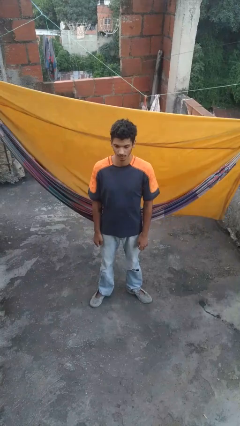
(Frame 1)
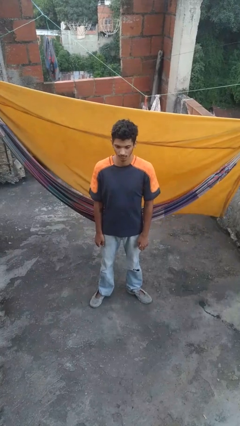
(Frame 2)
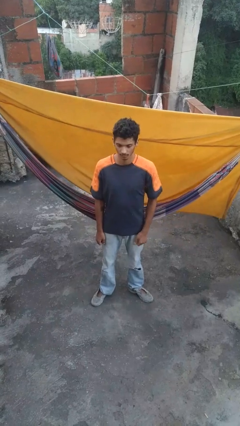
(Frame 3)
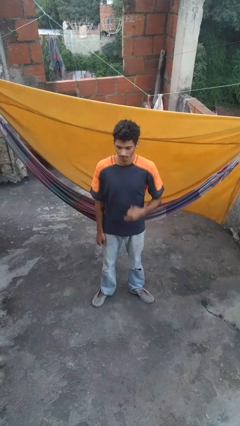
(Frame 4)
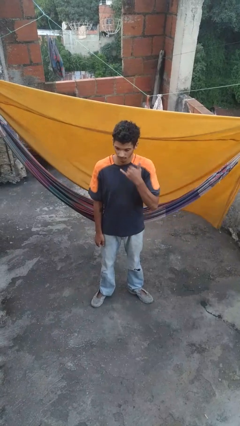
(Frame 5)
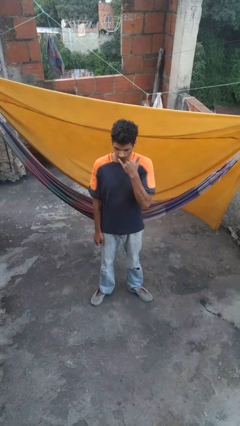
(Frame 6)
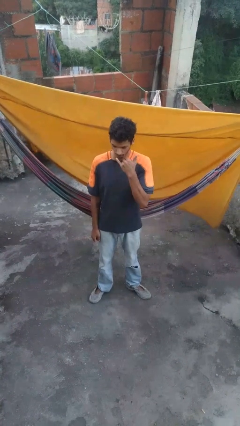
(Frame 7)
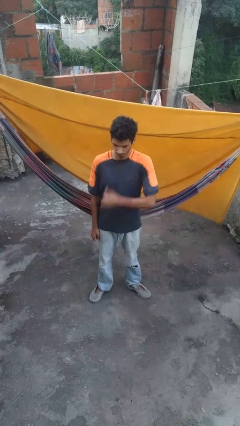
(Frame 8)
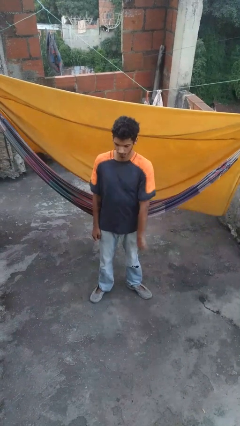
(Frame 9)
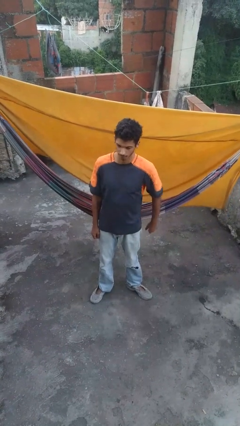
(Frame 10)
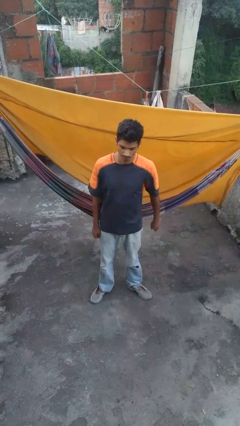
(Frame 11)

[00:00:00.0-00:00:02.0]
person gestures call me

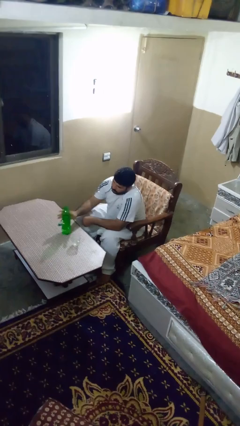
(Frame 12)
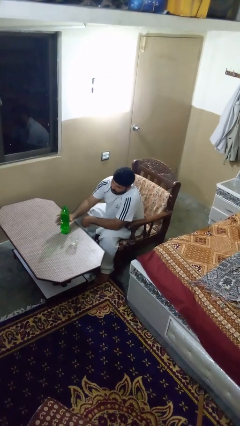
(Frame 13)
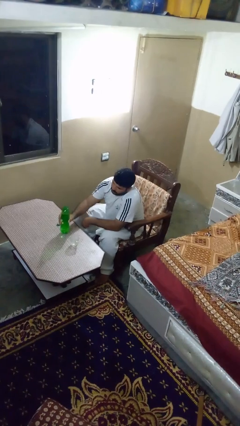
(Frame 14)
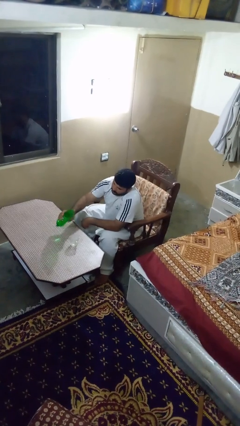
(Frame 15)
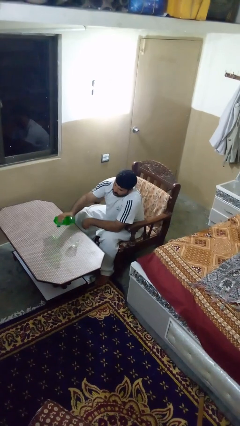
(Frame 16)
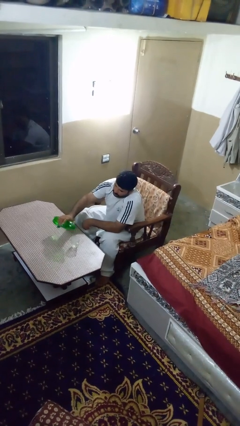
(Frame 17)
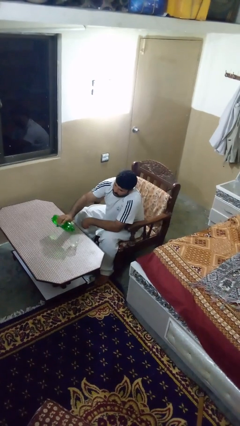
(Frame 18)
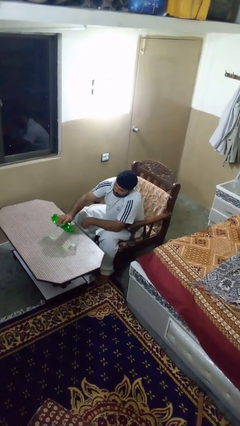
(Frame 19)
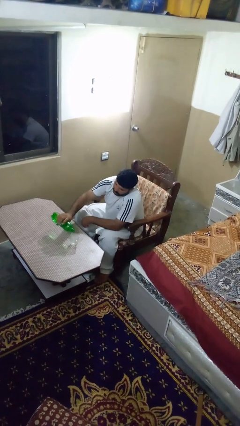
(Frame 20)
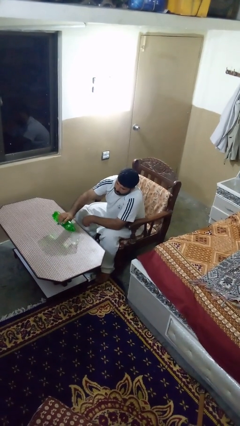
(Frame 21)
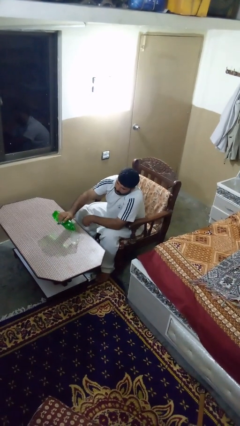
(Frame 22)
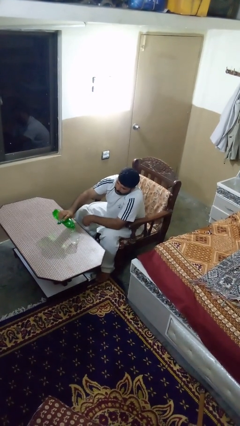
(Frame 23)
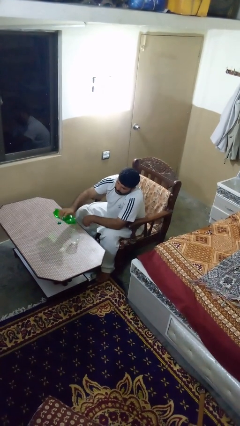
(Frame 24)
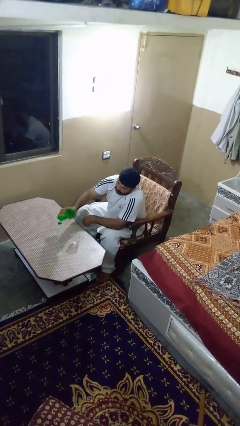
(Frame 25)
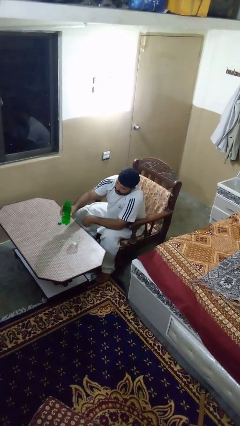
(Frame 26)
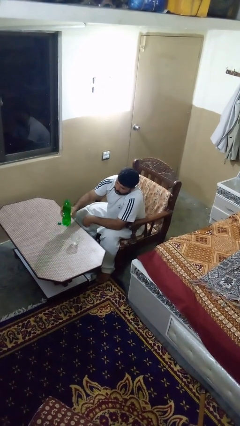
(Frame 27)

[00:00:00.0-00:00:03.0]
person pours liquid into cup

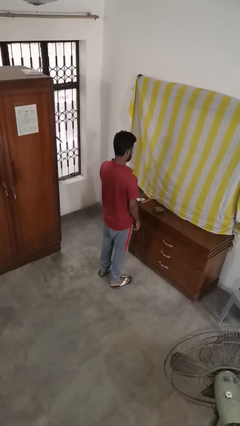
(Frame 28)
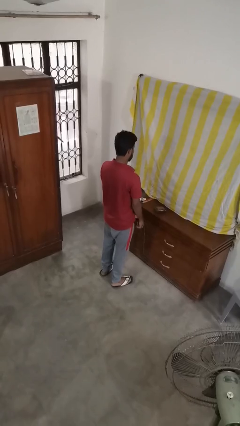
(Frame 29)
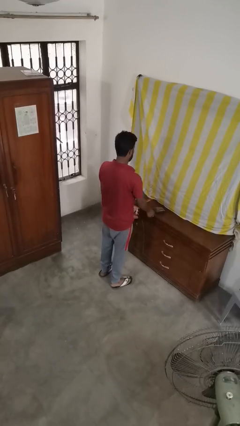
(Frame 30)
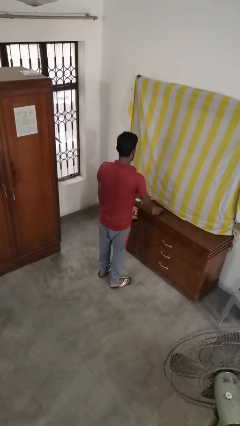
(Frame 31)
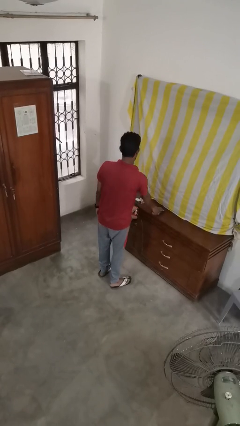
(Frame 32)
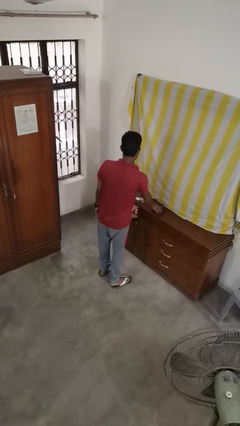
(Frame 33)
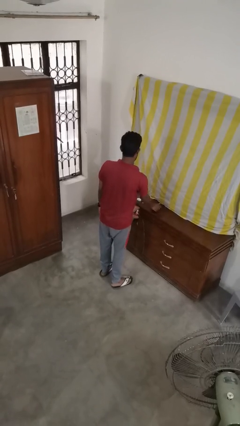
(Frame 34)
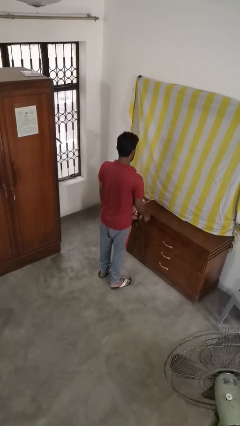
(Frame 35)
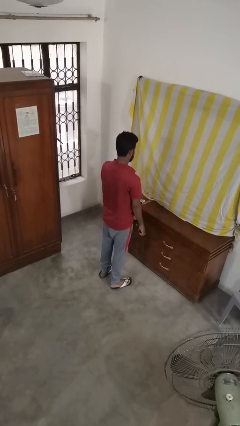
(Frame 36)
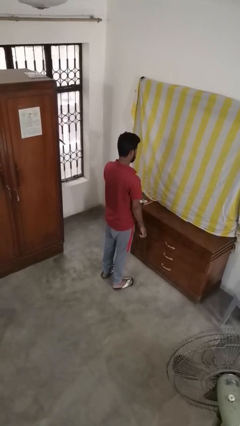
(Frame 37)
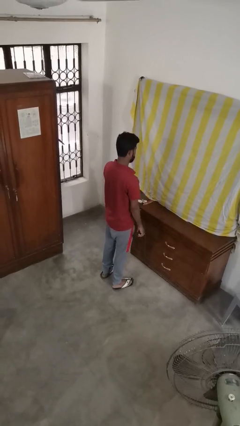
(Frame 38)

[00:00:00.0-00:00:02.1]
person picks up object from table

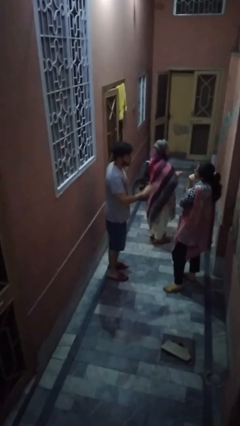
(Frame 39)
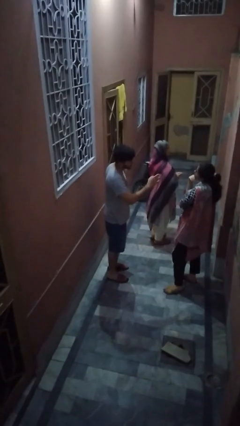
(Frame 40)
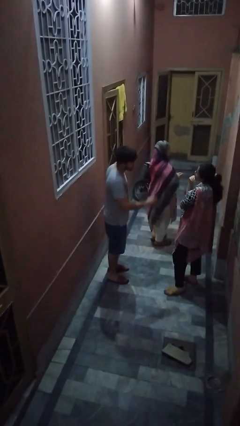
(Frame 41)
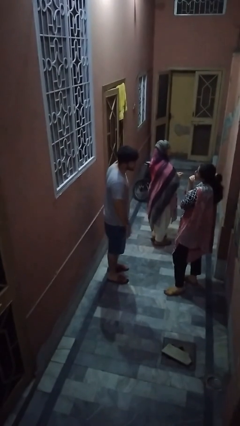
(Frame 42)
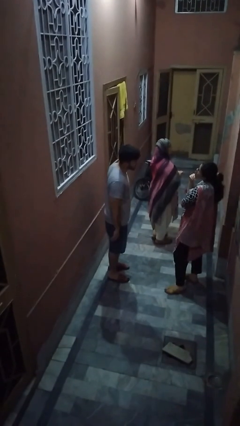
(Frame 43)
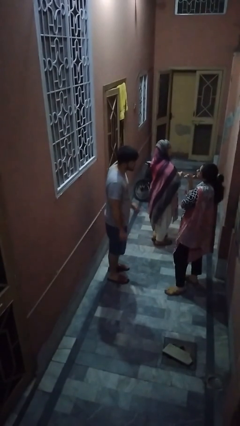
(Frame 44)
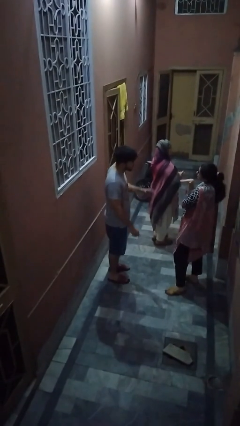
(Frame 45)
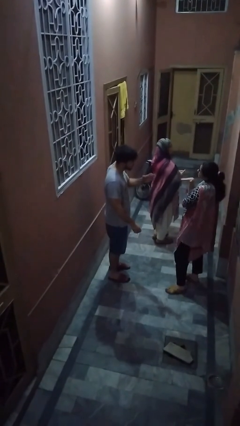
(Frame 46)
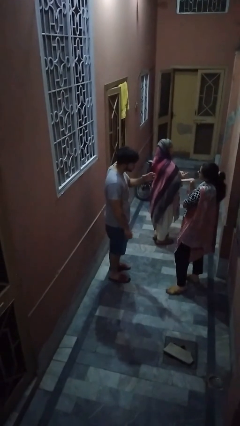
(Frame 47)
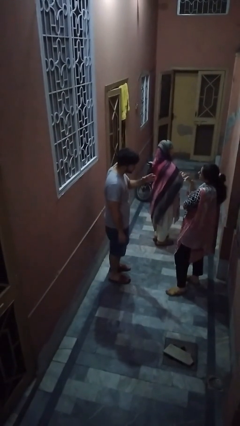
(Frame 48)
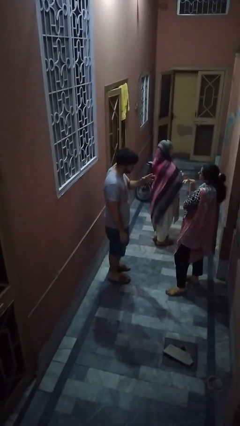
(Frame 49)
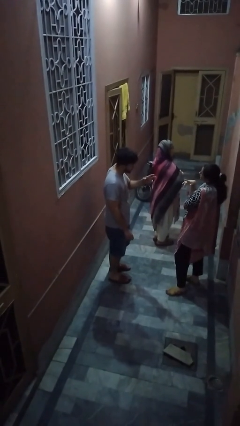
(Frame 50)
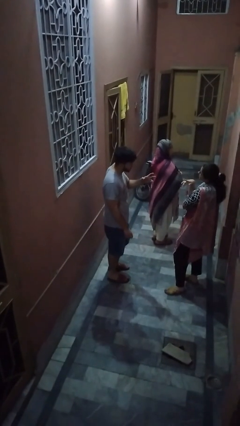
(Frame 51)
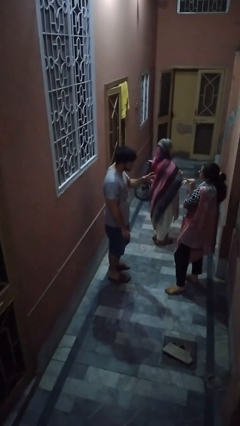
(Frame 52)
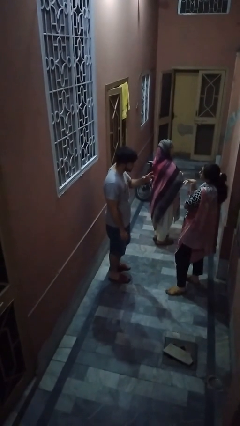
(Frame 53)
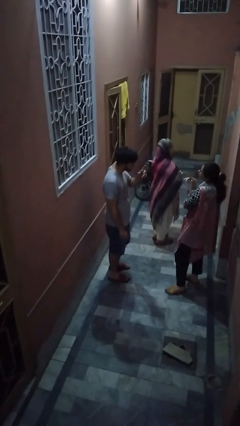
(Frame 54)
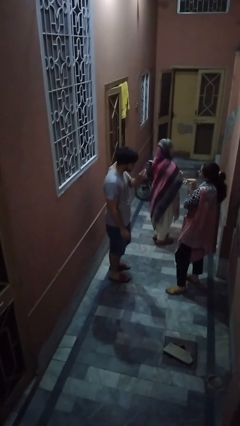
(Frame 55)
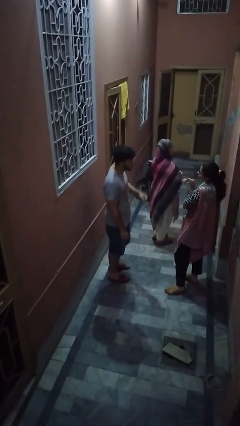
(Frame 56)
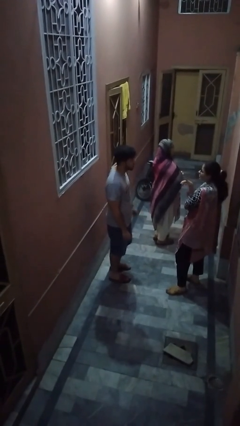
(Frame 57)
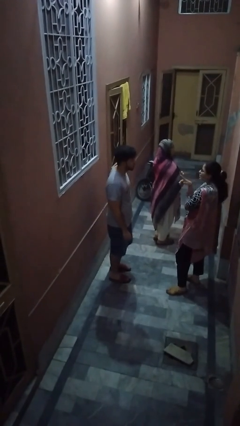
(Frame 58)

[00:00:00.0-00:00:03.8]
person talks to person

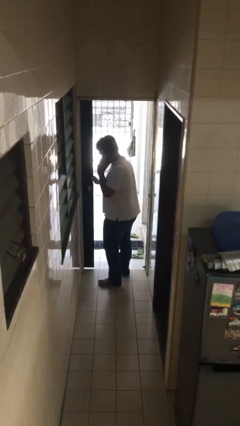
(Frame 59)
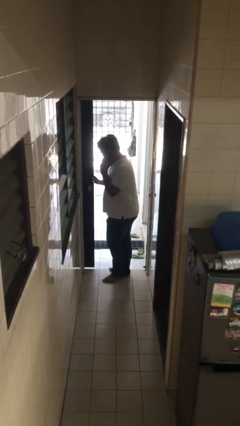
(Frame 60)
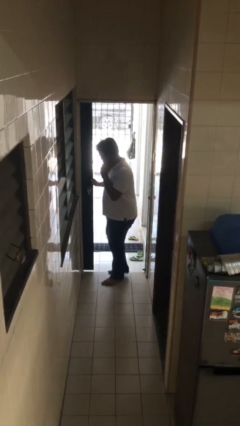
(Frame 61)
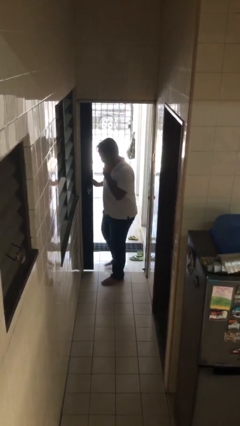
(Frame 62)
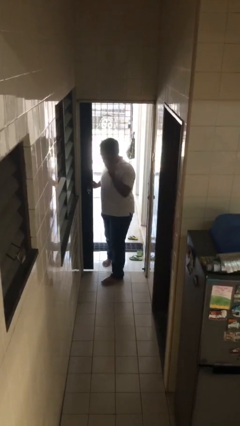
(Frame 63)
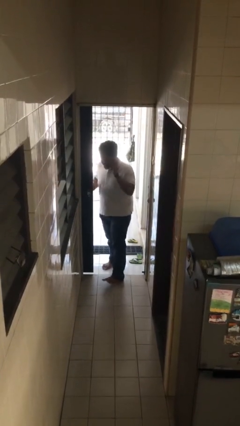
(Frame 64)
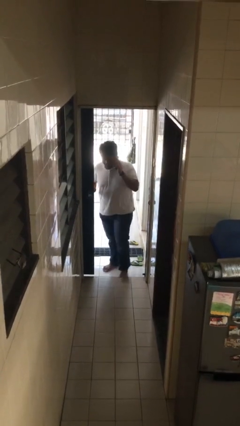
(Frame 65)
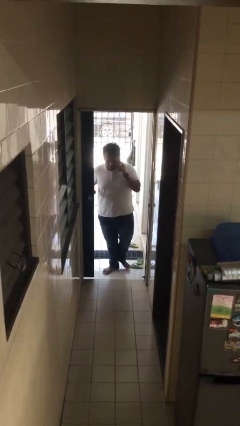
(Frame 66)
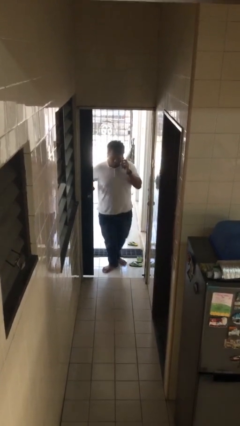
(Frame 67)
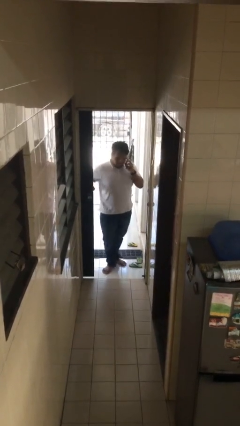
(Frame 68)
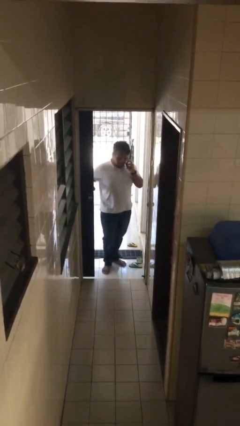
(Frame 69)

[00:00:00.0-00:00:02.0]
person exits scene through structure

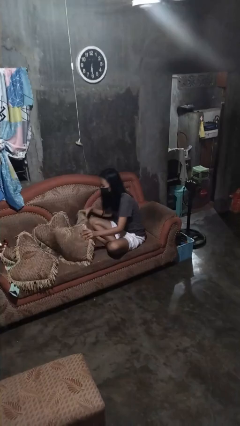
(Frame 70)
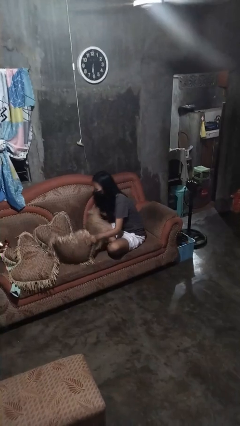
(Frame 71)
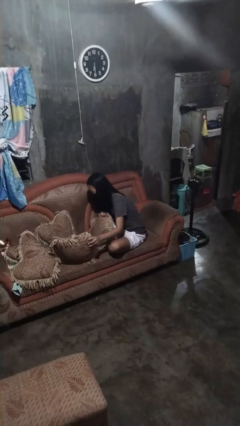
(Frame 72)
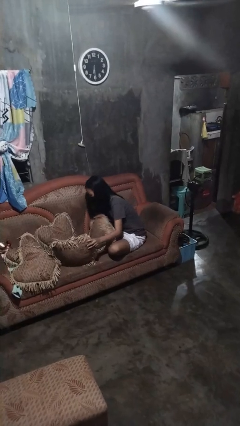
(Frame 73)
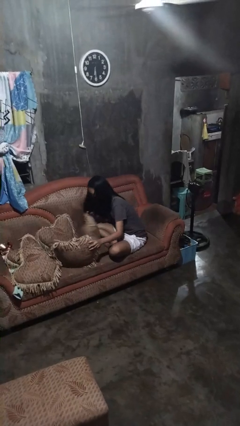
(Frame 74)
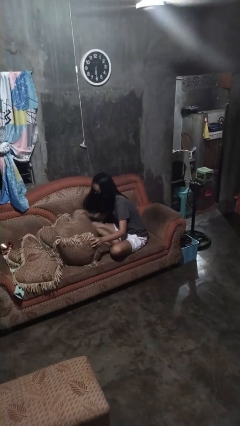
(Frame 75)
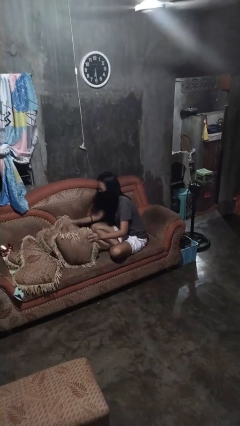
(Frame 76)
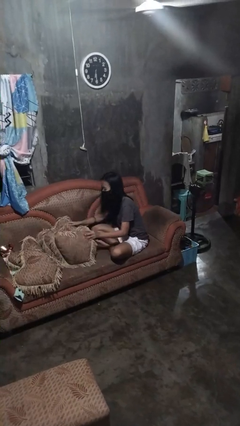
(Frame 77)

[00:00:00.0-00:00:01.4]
person searches in couch

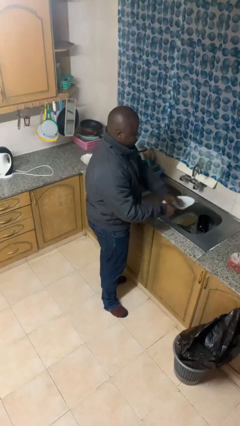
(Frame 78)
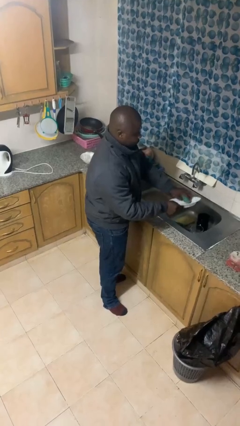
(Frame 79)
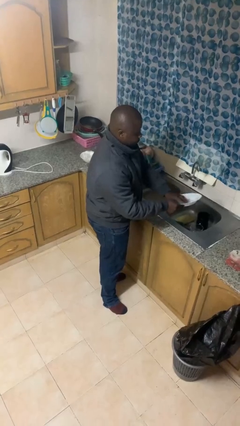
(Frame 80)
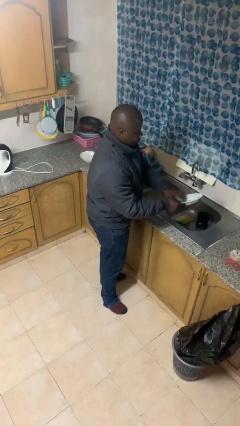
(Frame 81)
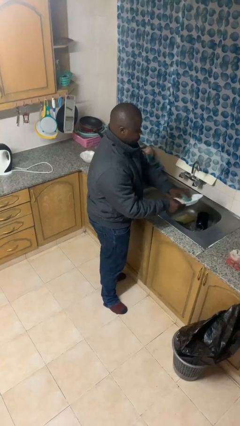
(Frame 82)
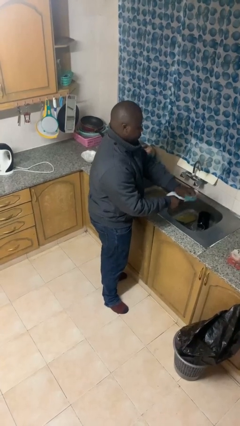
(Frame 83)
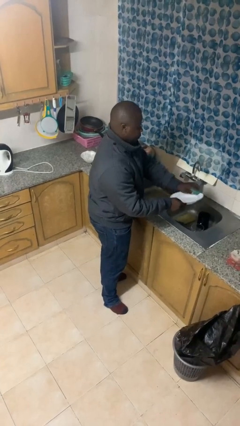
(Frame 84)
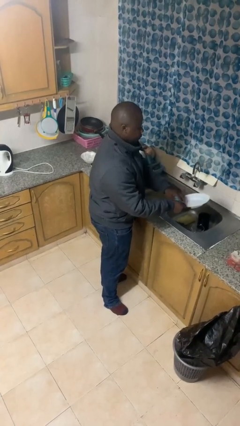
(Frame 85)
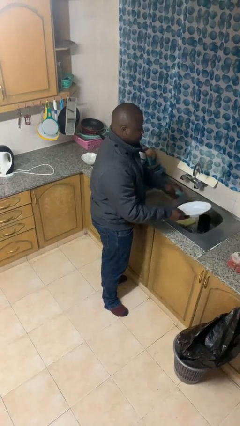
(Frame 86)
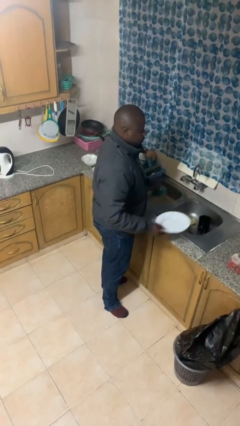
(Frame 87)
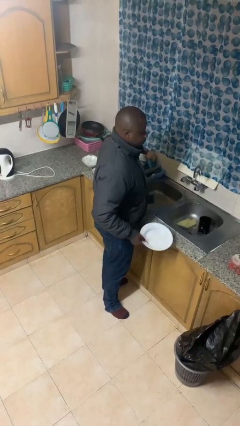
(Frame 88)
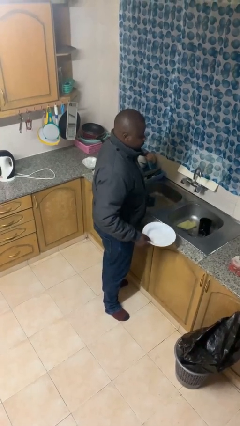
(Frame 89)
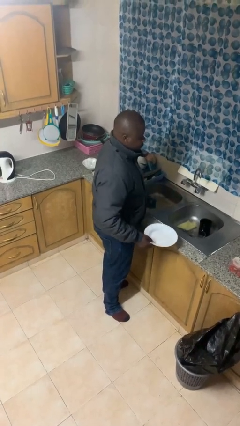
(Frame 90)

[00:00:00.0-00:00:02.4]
person washes dish

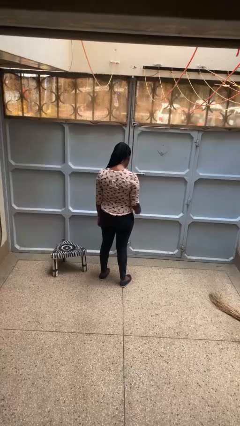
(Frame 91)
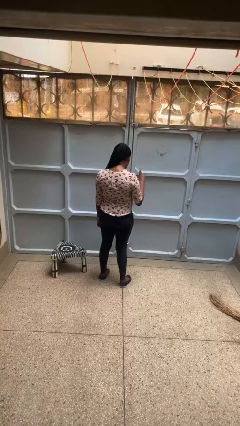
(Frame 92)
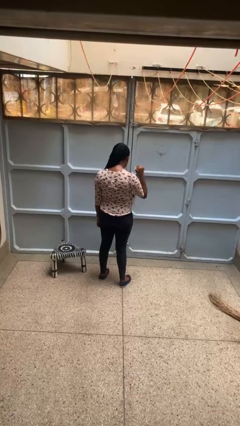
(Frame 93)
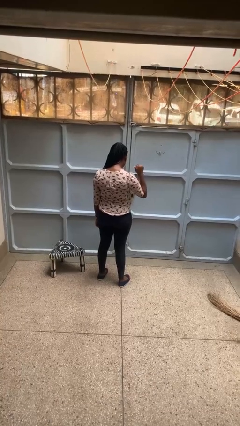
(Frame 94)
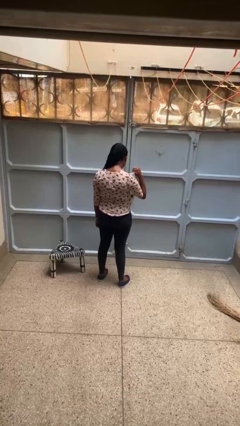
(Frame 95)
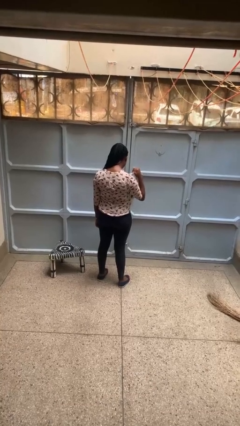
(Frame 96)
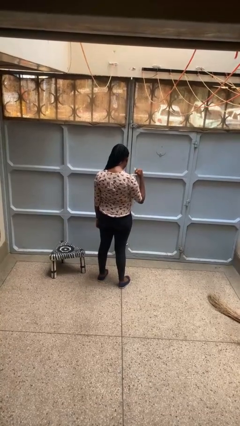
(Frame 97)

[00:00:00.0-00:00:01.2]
person gestures behind me
